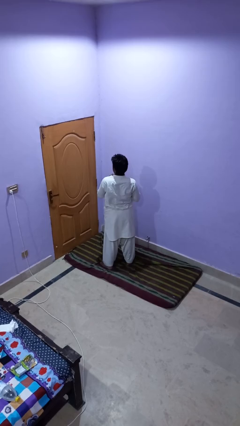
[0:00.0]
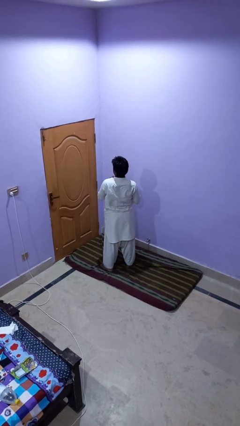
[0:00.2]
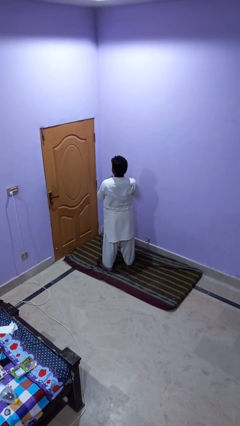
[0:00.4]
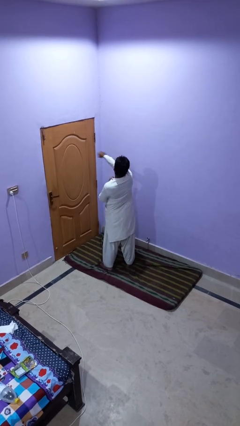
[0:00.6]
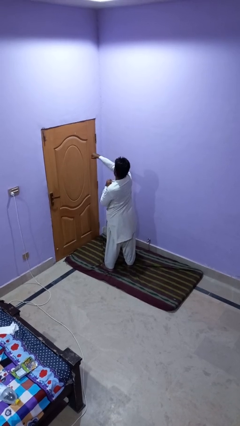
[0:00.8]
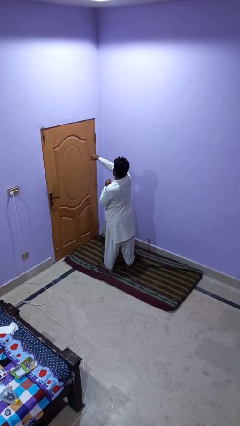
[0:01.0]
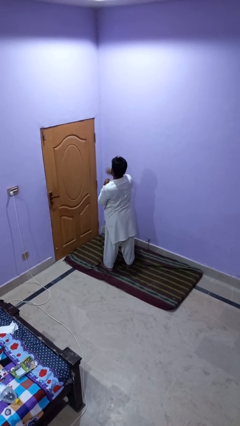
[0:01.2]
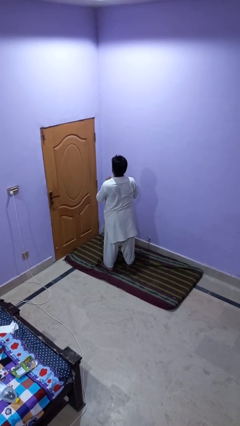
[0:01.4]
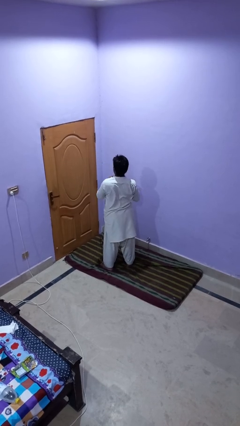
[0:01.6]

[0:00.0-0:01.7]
person punches

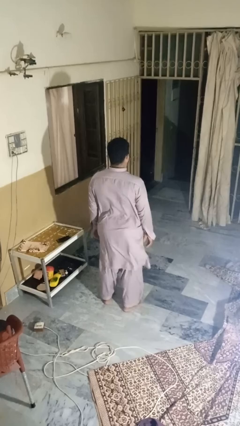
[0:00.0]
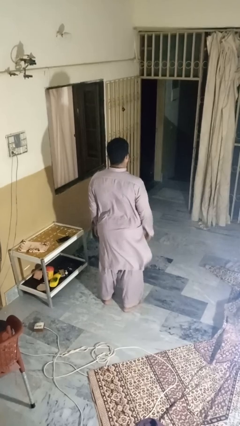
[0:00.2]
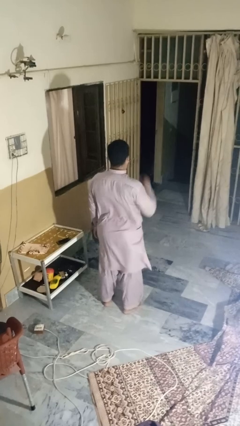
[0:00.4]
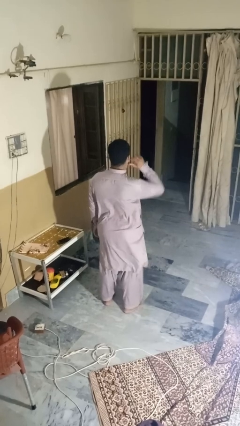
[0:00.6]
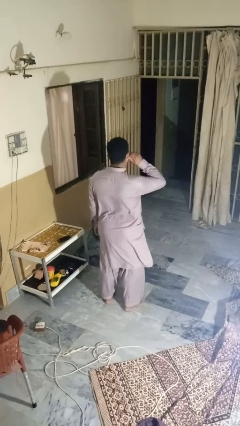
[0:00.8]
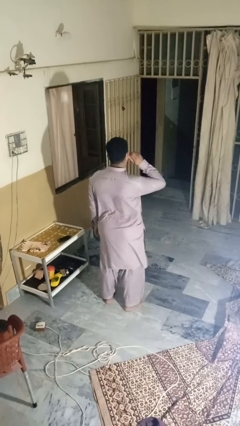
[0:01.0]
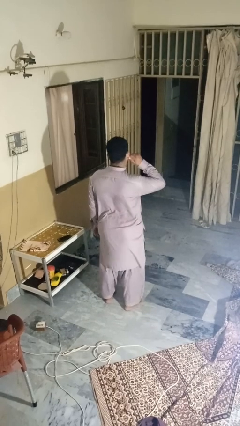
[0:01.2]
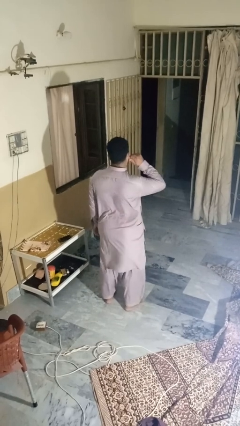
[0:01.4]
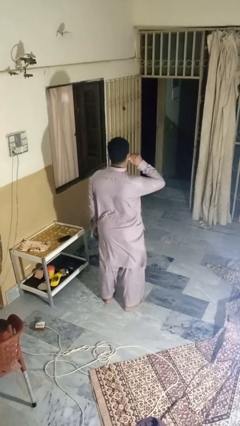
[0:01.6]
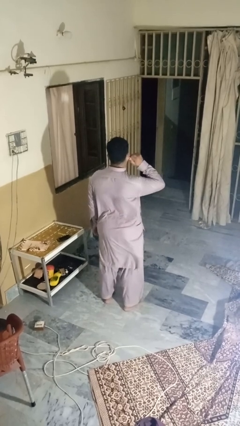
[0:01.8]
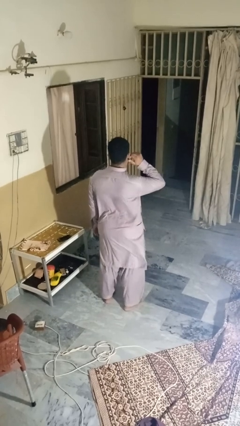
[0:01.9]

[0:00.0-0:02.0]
person touches earlobe

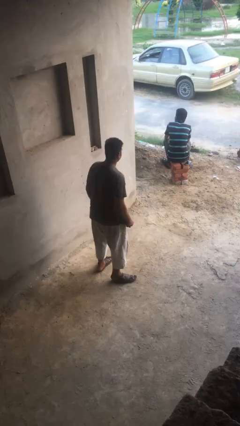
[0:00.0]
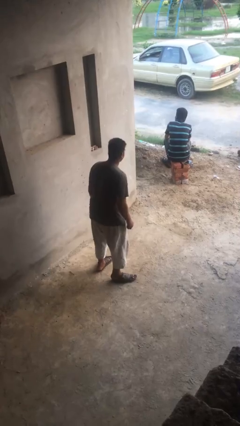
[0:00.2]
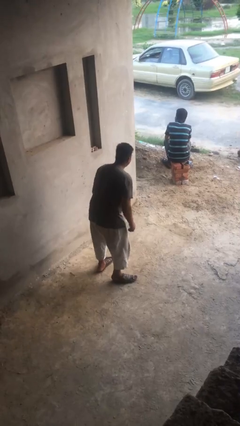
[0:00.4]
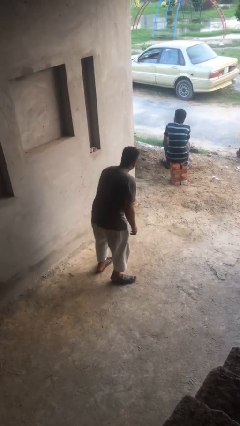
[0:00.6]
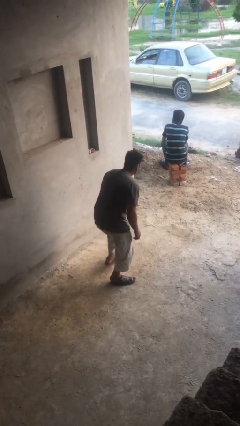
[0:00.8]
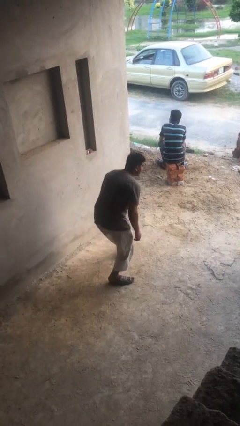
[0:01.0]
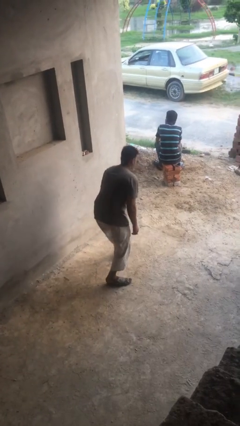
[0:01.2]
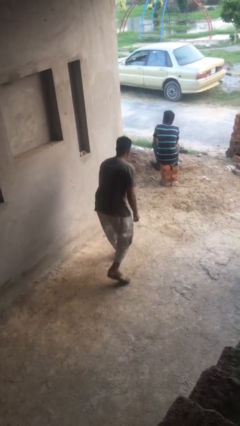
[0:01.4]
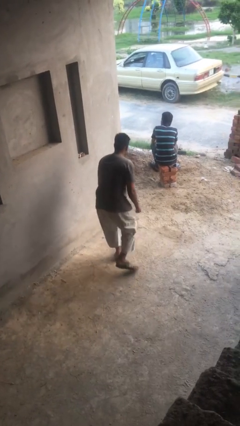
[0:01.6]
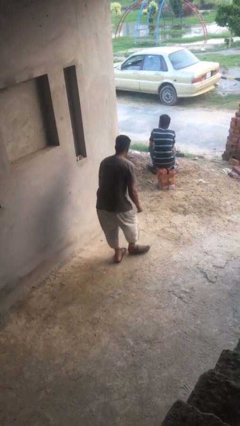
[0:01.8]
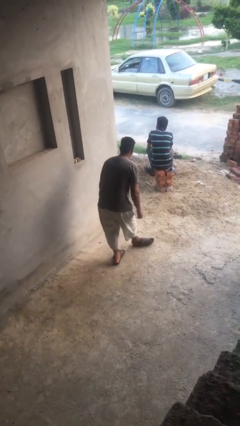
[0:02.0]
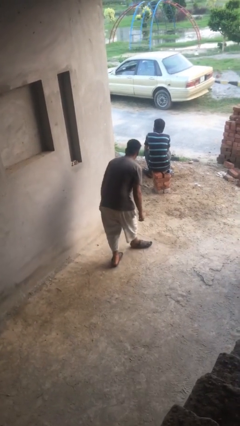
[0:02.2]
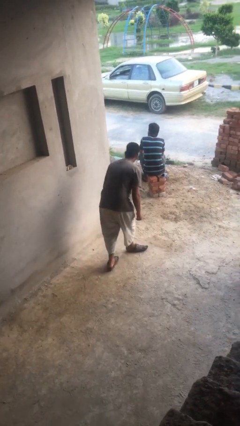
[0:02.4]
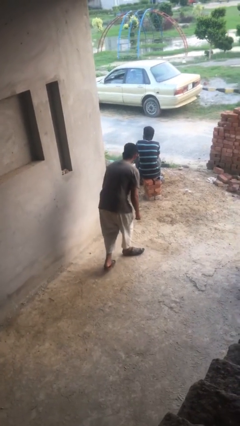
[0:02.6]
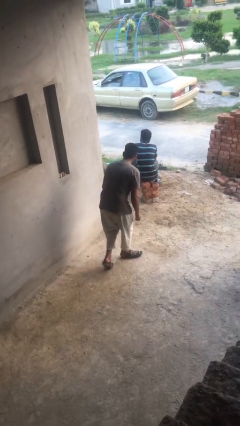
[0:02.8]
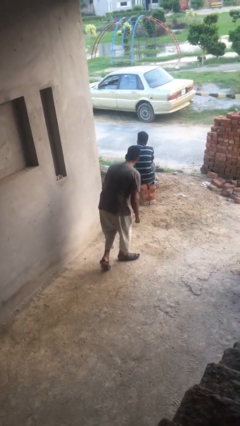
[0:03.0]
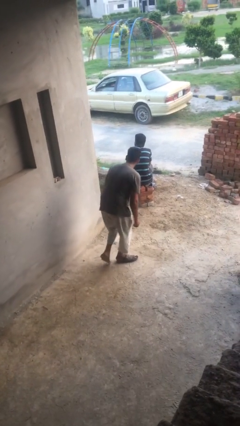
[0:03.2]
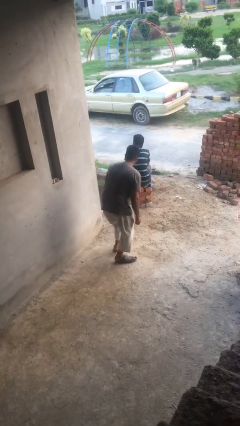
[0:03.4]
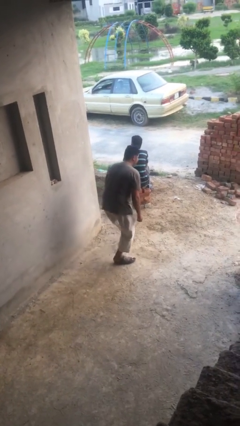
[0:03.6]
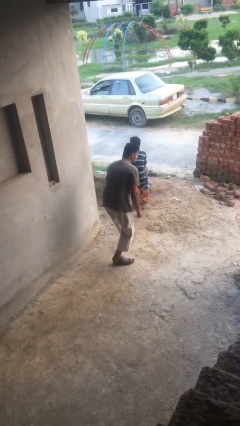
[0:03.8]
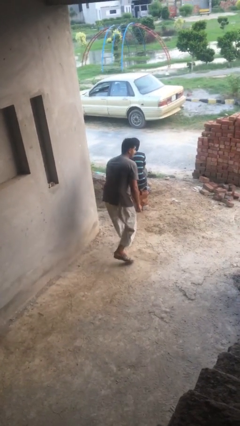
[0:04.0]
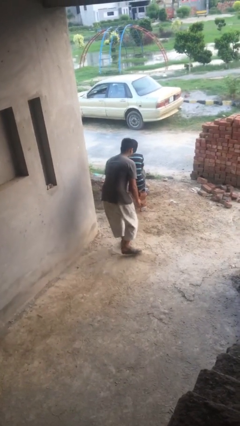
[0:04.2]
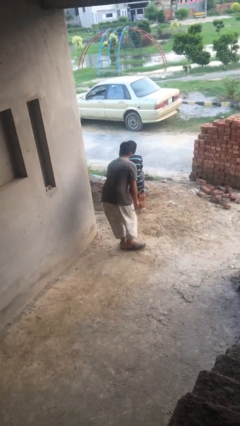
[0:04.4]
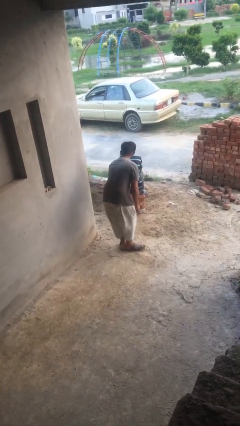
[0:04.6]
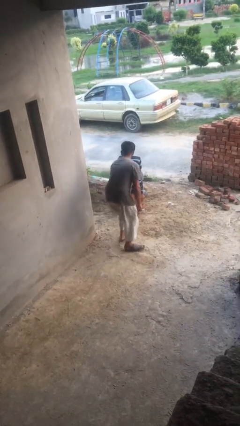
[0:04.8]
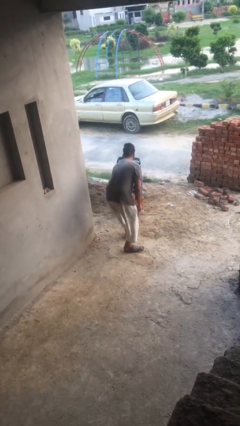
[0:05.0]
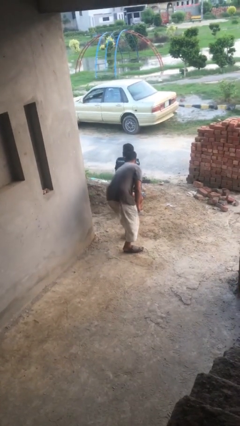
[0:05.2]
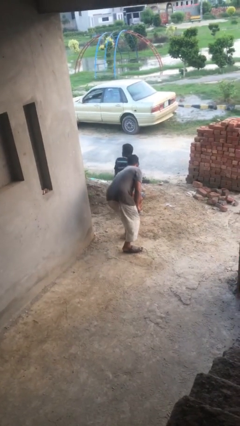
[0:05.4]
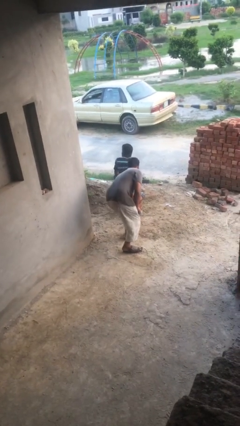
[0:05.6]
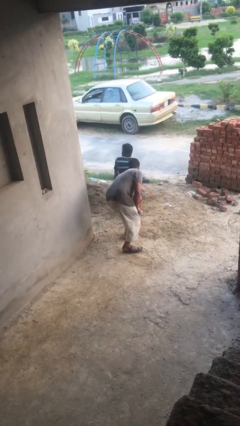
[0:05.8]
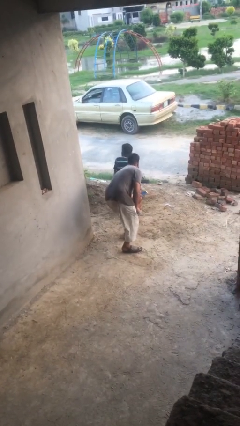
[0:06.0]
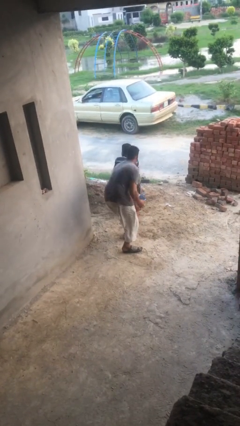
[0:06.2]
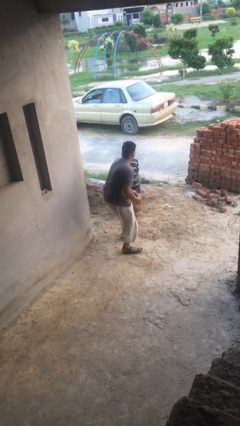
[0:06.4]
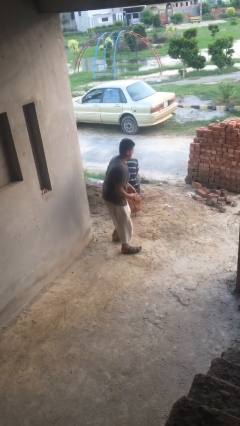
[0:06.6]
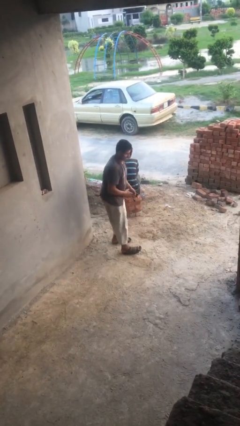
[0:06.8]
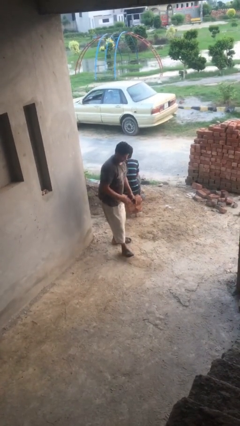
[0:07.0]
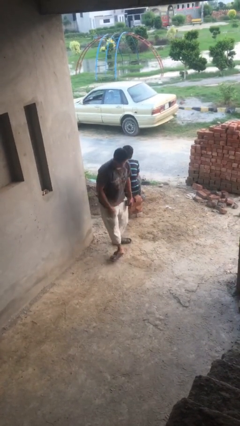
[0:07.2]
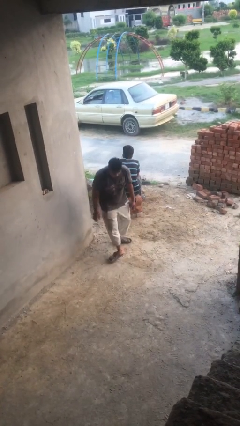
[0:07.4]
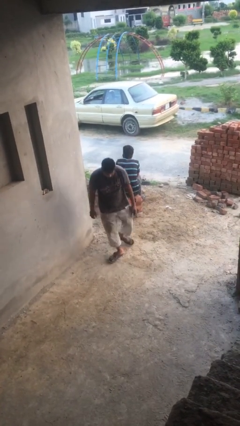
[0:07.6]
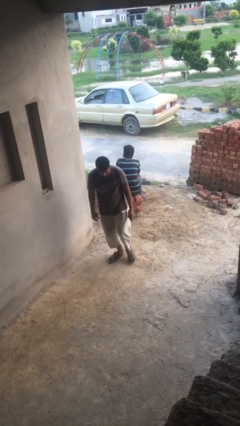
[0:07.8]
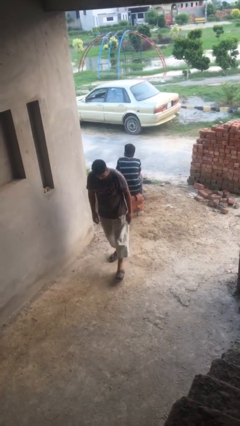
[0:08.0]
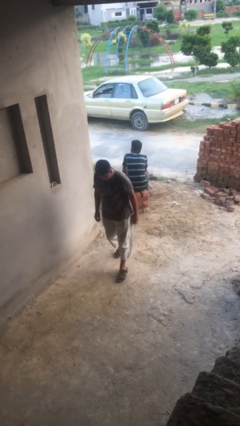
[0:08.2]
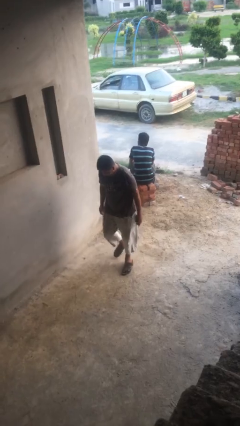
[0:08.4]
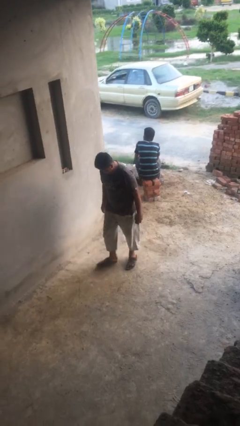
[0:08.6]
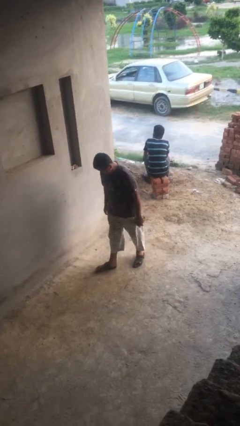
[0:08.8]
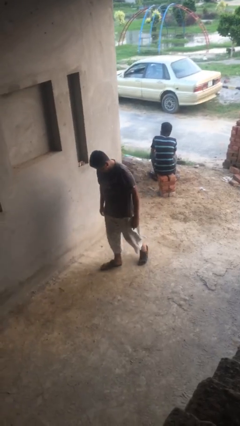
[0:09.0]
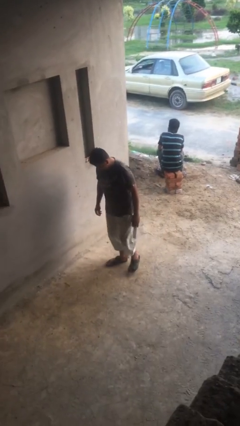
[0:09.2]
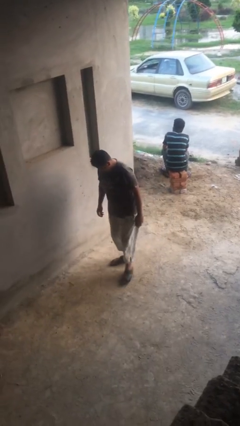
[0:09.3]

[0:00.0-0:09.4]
person steals object from person

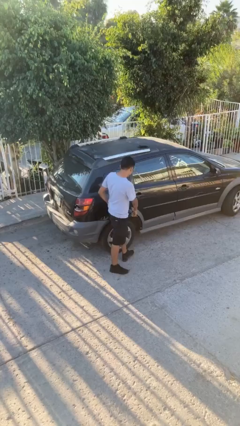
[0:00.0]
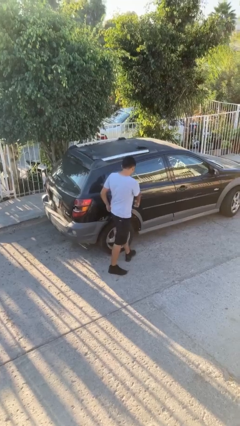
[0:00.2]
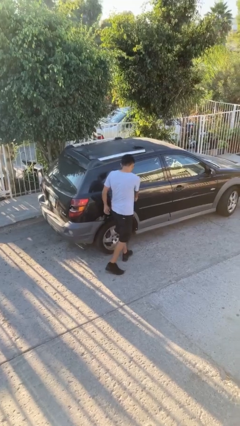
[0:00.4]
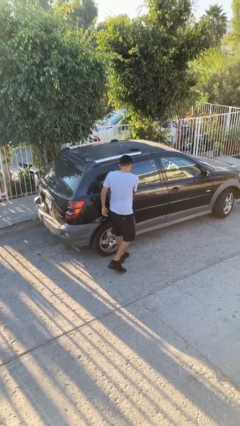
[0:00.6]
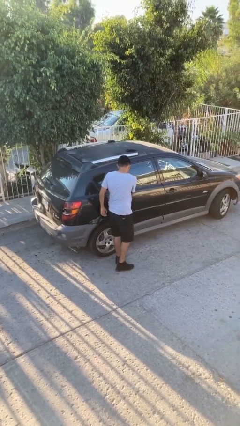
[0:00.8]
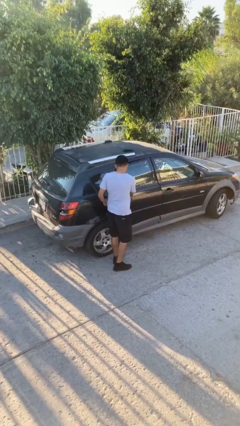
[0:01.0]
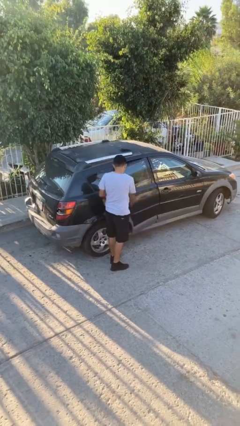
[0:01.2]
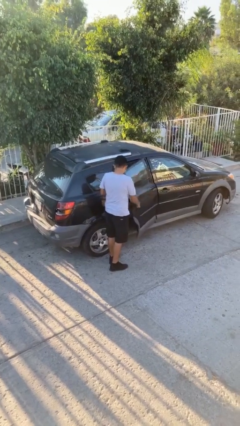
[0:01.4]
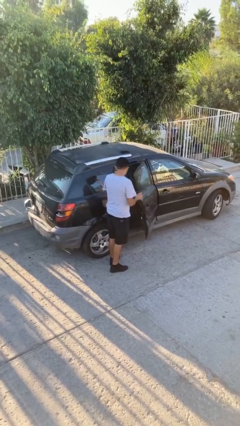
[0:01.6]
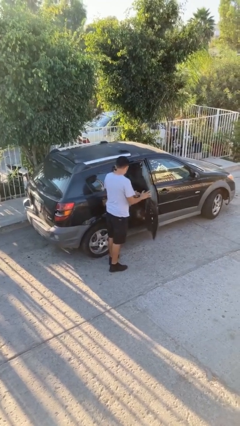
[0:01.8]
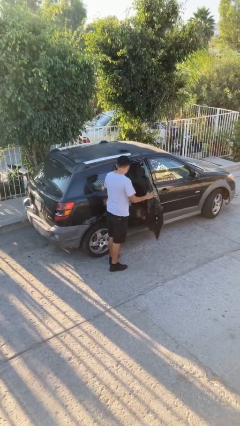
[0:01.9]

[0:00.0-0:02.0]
person opens car door

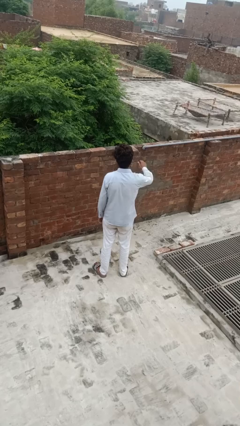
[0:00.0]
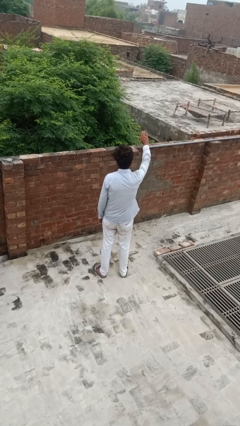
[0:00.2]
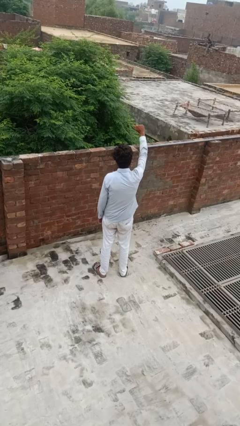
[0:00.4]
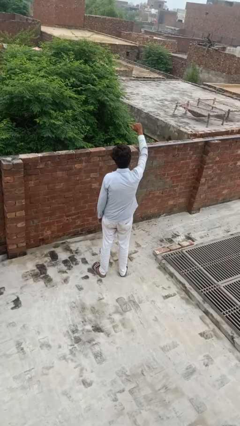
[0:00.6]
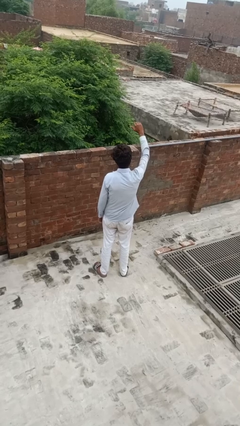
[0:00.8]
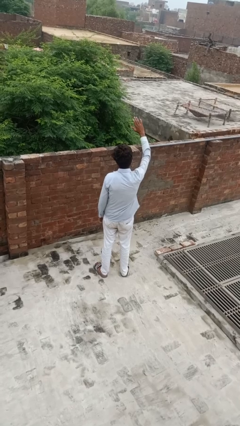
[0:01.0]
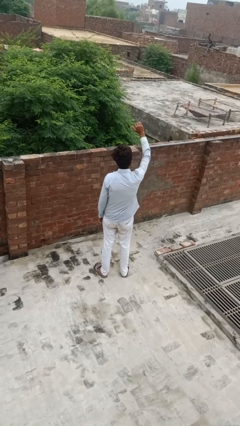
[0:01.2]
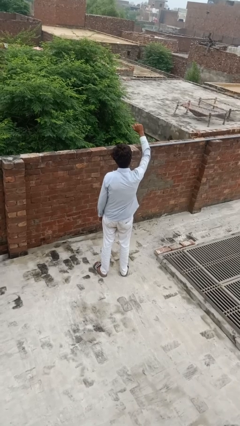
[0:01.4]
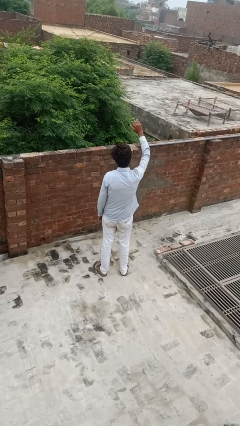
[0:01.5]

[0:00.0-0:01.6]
person gestures come here

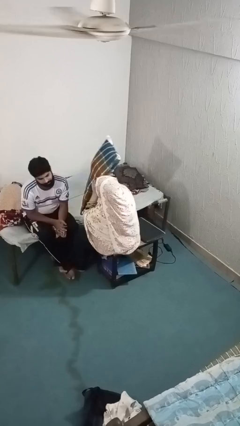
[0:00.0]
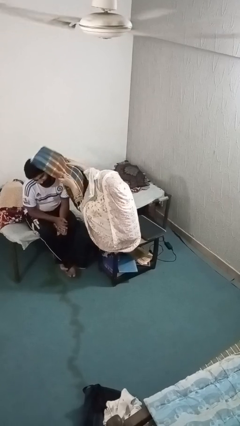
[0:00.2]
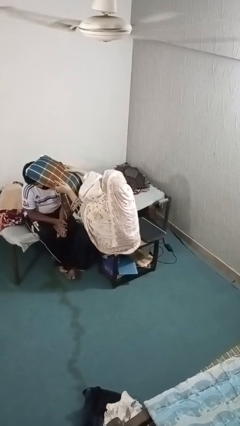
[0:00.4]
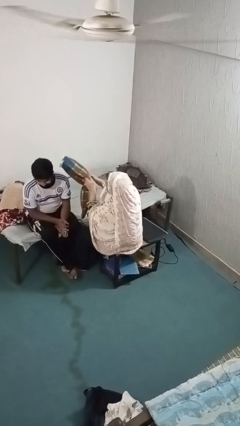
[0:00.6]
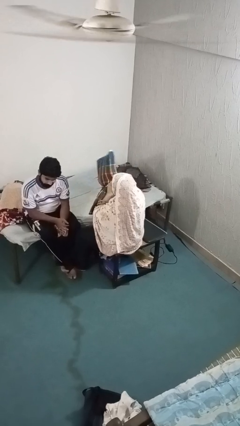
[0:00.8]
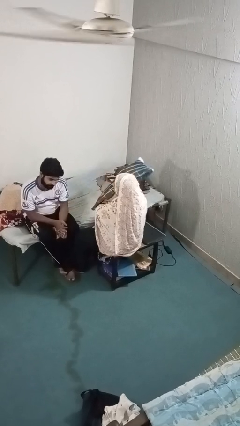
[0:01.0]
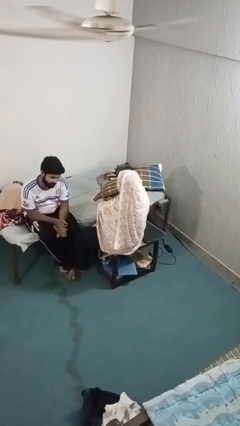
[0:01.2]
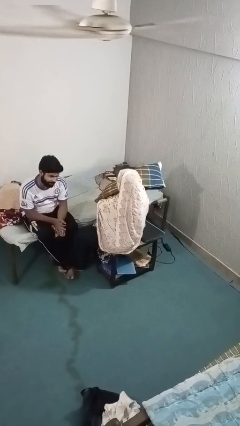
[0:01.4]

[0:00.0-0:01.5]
person hits person with pillow
